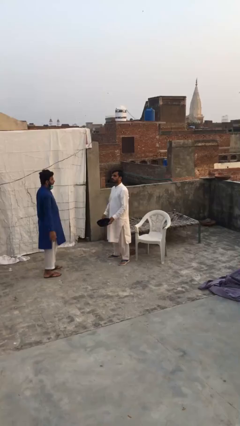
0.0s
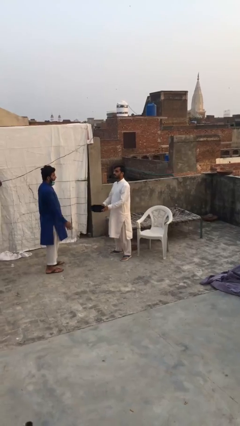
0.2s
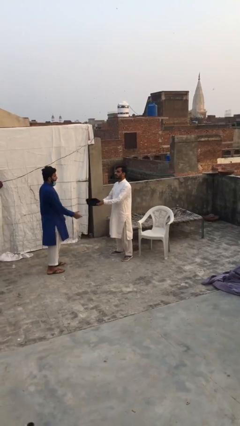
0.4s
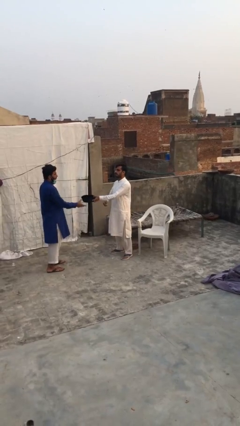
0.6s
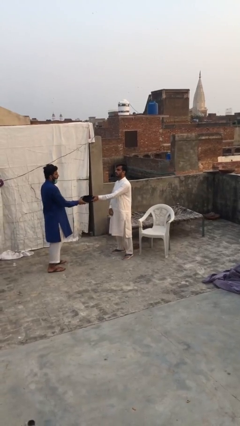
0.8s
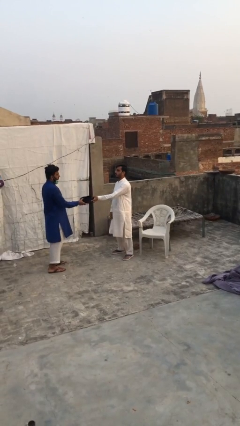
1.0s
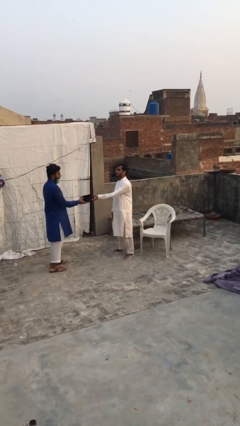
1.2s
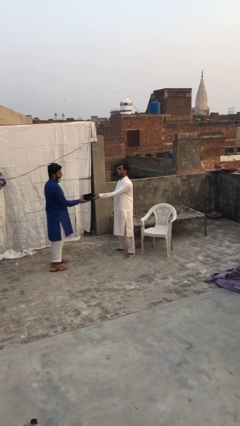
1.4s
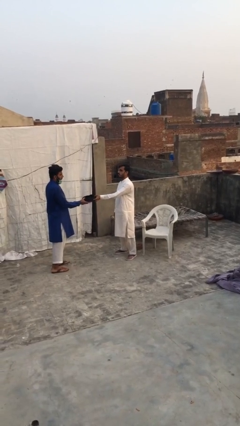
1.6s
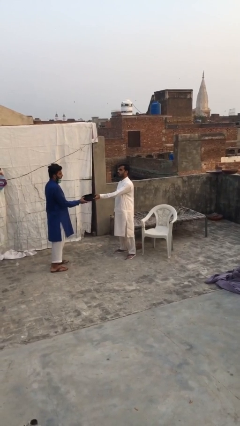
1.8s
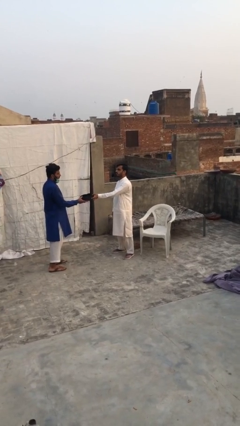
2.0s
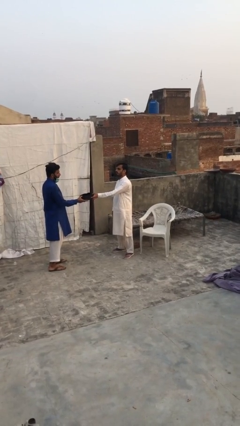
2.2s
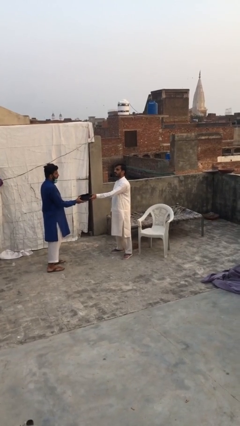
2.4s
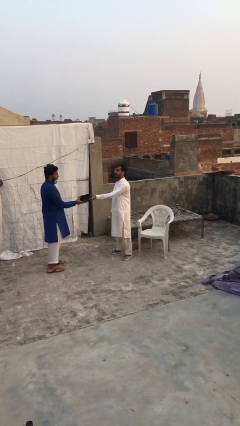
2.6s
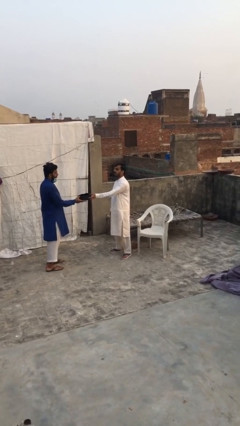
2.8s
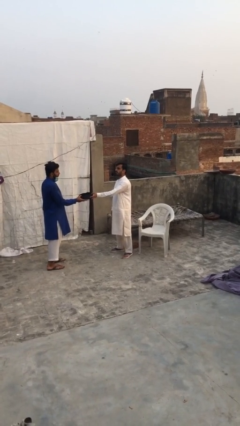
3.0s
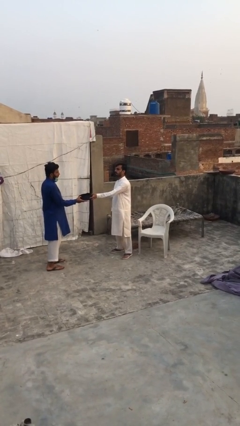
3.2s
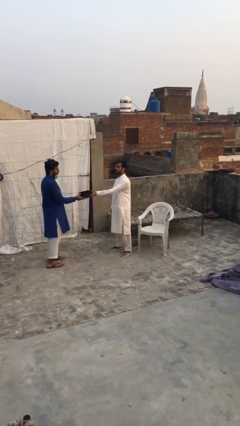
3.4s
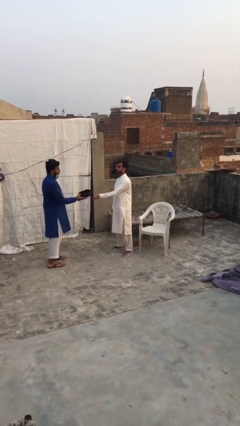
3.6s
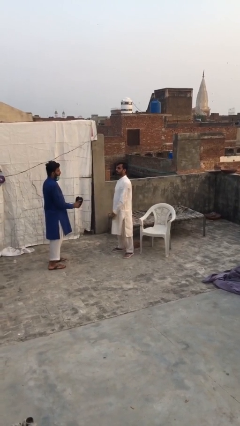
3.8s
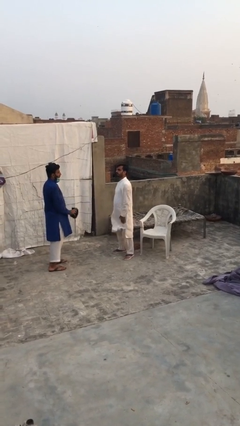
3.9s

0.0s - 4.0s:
person transfers object to person

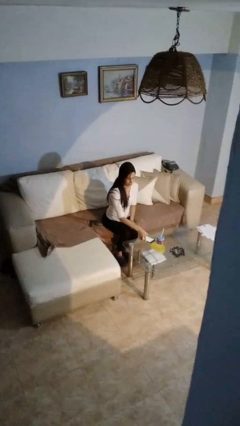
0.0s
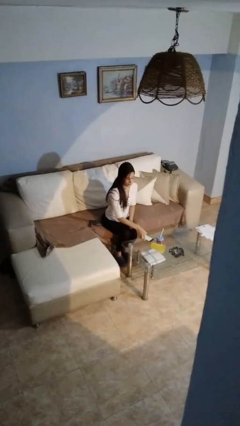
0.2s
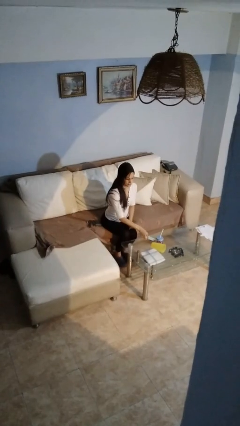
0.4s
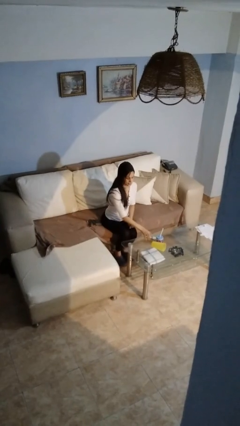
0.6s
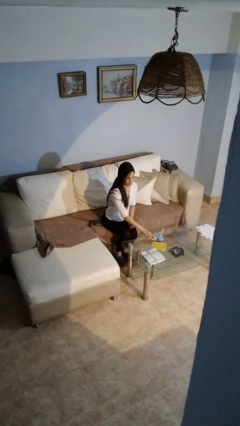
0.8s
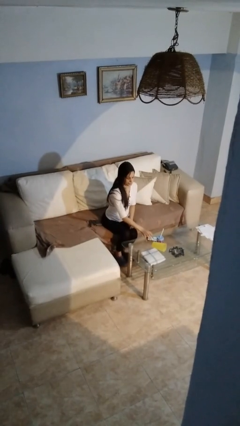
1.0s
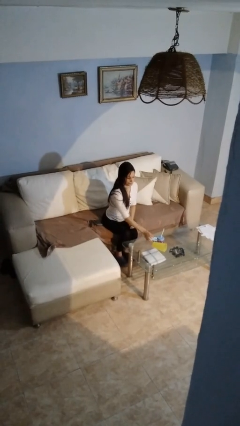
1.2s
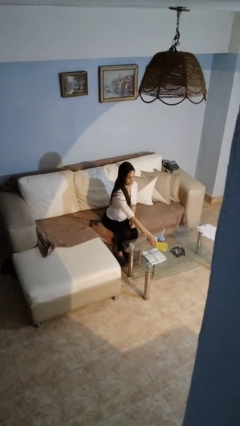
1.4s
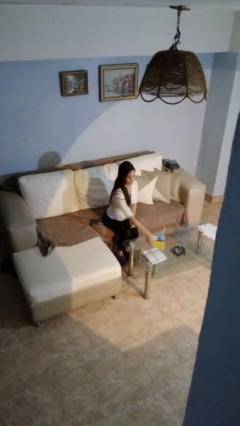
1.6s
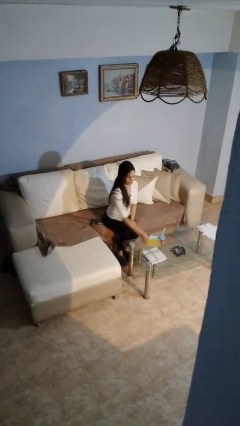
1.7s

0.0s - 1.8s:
person sets upright glass

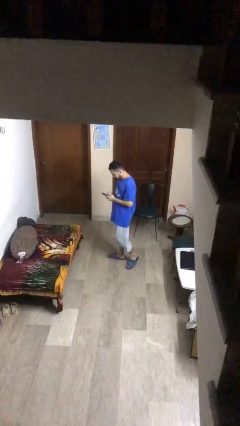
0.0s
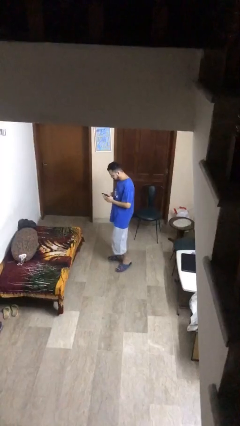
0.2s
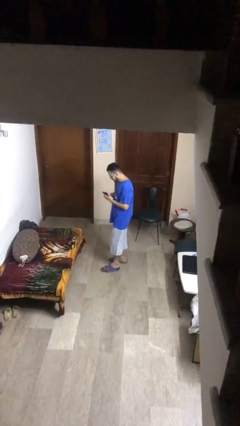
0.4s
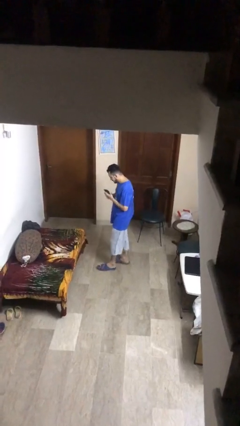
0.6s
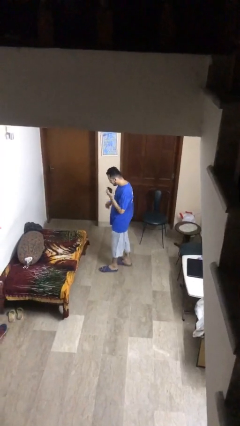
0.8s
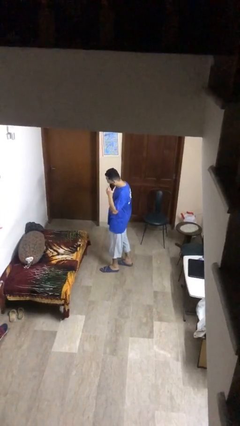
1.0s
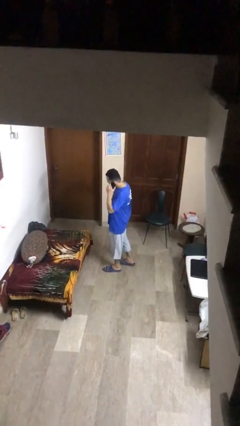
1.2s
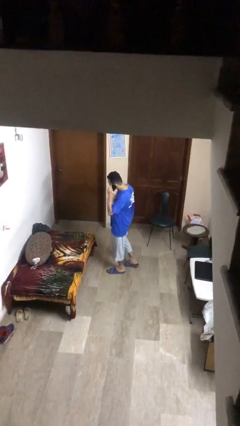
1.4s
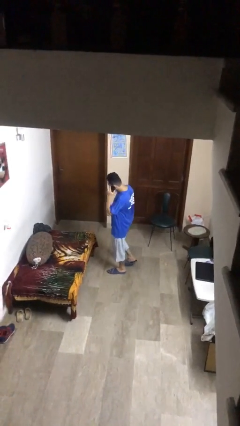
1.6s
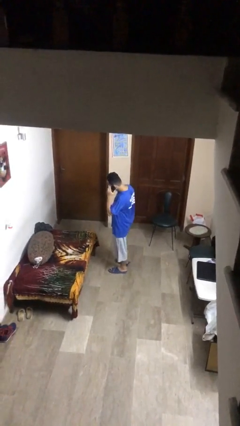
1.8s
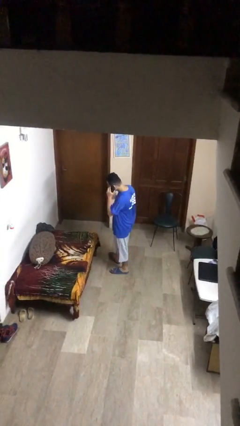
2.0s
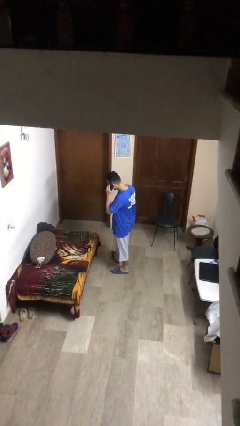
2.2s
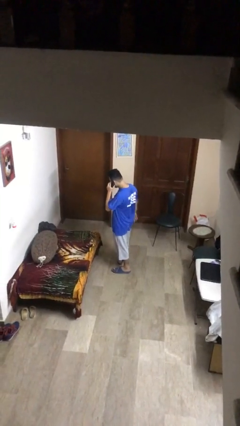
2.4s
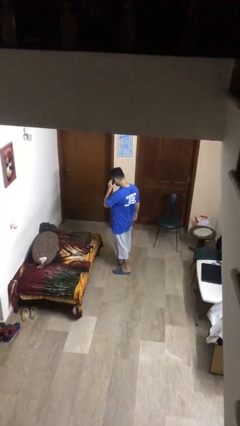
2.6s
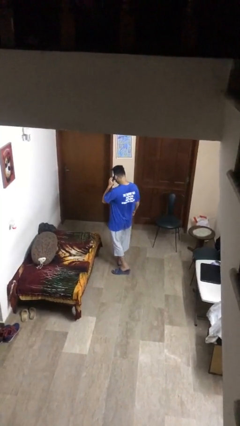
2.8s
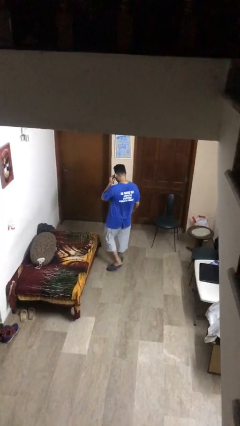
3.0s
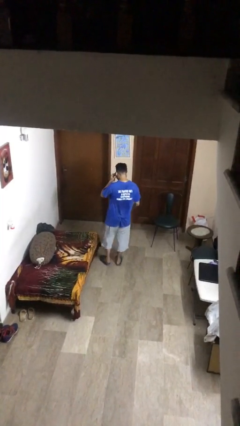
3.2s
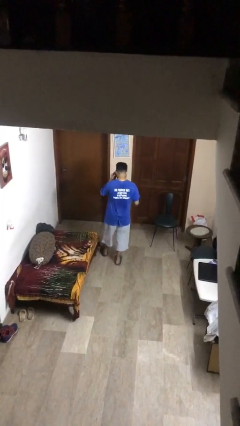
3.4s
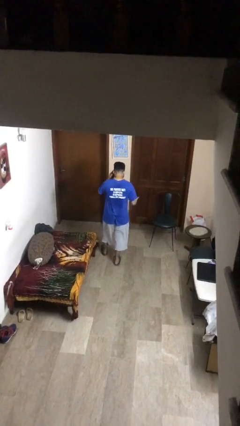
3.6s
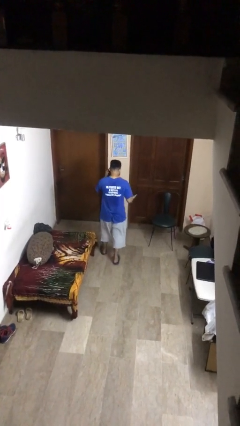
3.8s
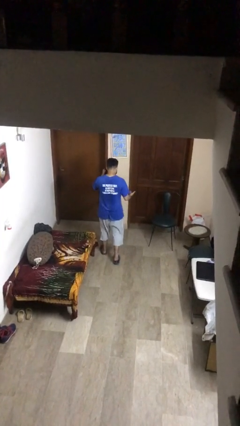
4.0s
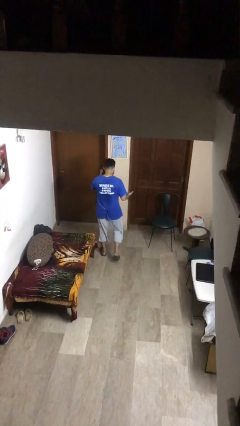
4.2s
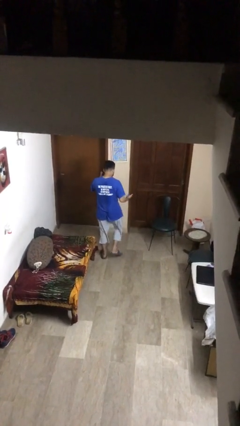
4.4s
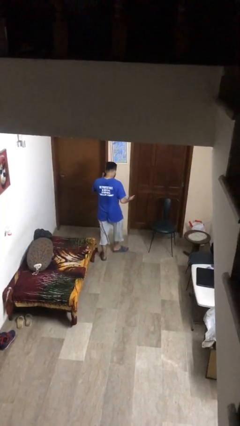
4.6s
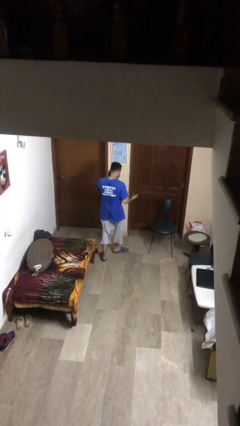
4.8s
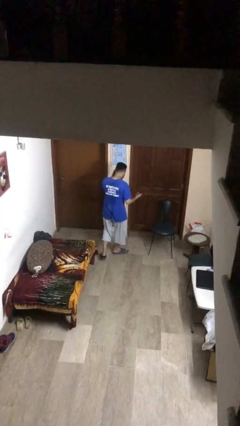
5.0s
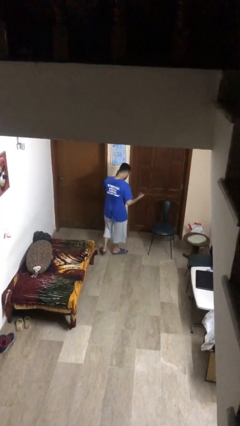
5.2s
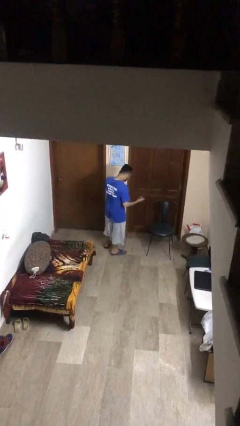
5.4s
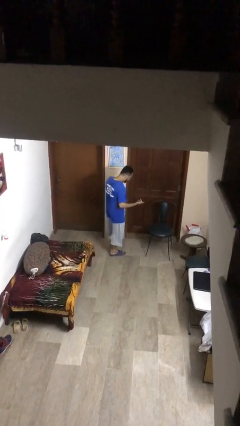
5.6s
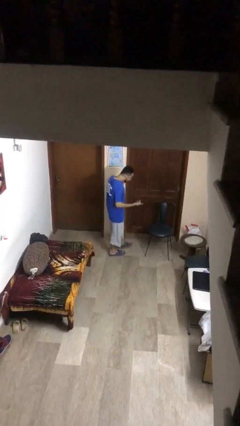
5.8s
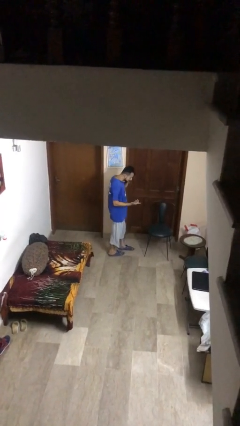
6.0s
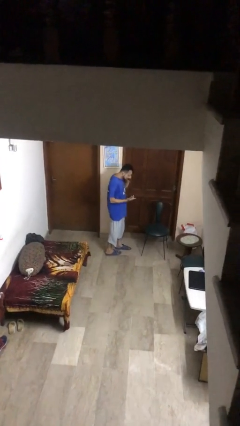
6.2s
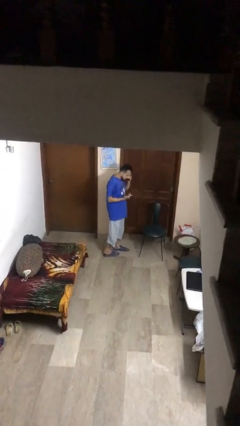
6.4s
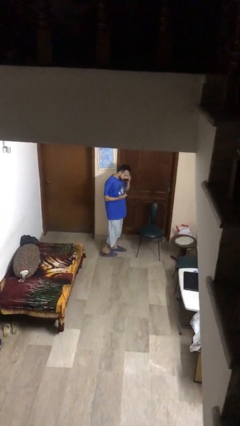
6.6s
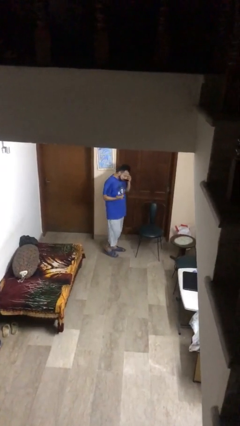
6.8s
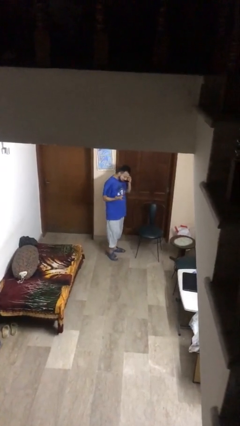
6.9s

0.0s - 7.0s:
person talks on phone

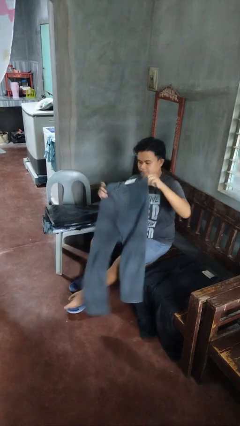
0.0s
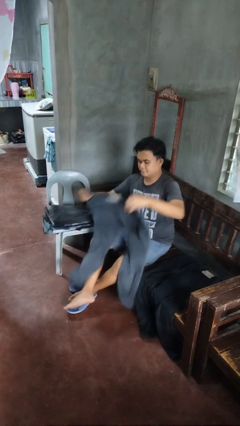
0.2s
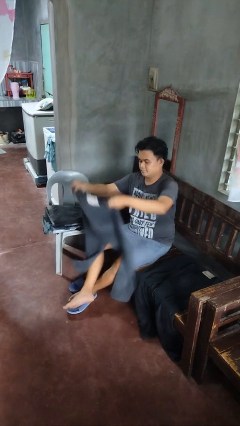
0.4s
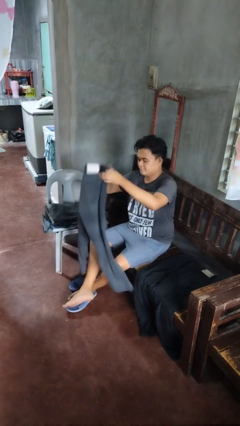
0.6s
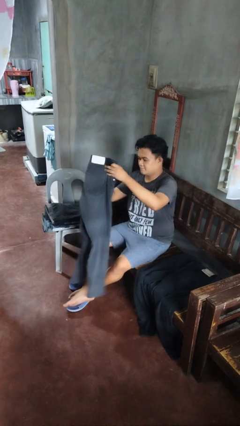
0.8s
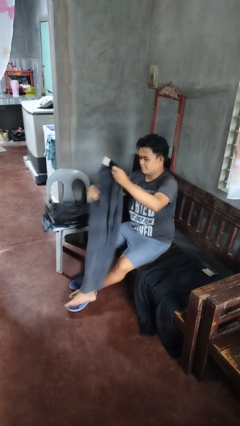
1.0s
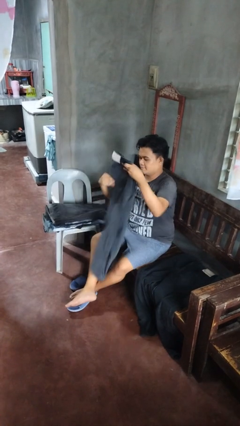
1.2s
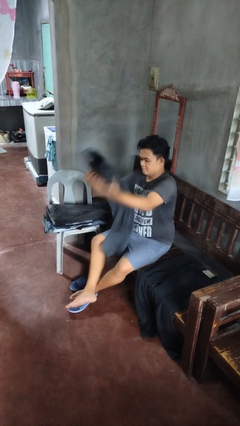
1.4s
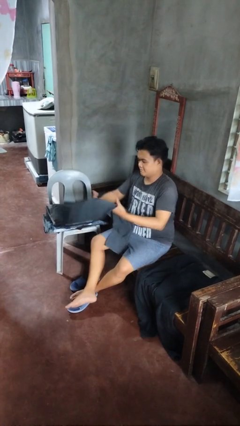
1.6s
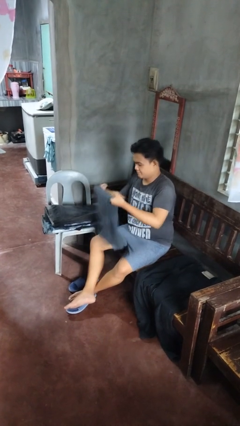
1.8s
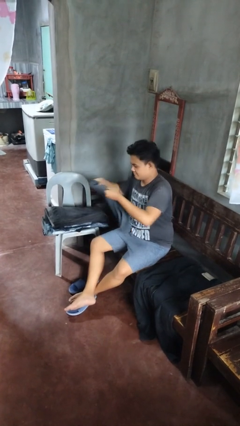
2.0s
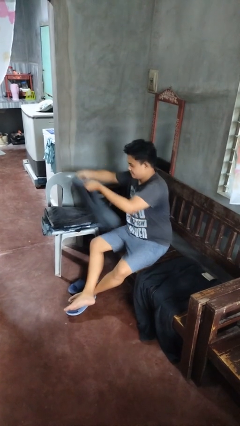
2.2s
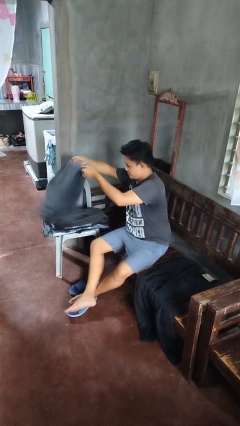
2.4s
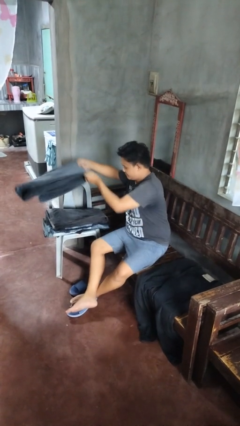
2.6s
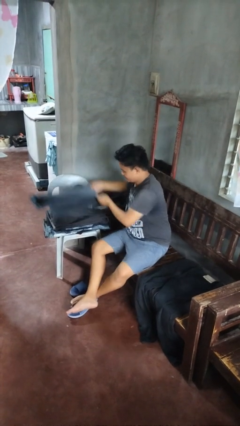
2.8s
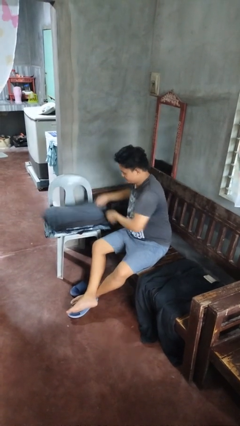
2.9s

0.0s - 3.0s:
person folds pants

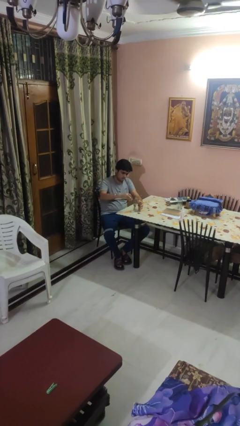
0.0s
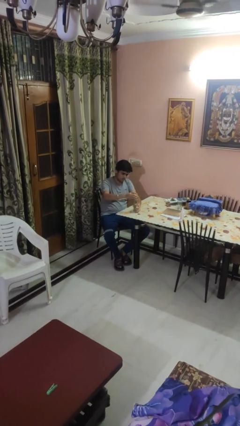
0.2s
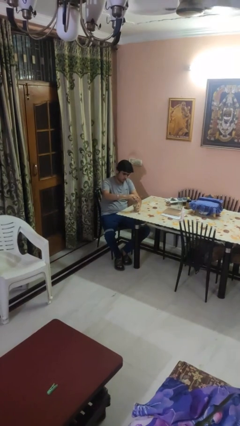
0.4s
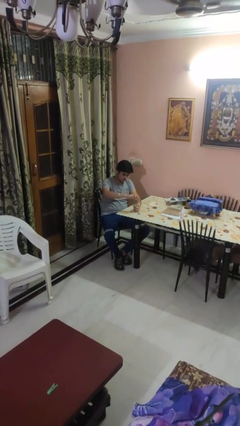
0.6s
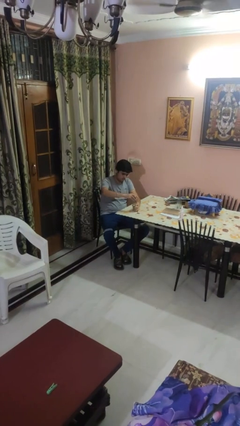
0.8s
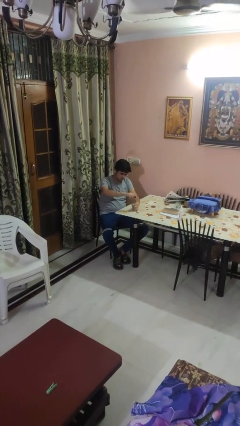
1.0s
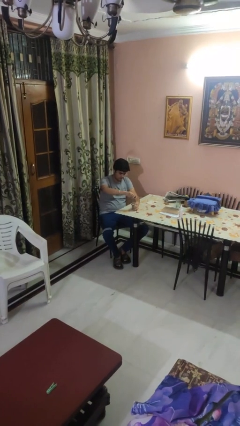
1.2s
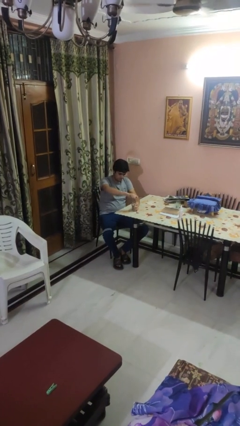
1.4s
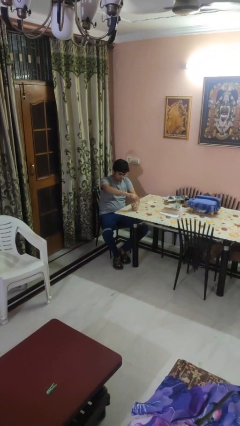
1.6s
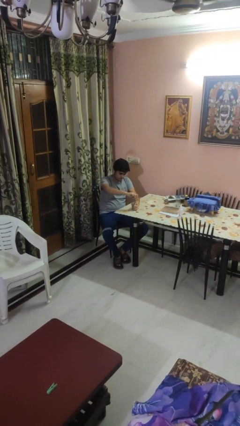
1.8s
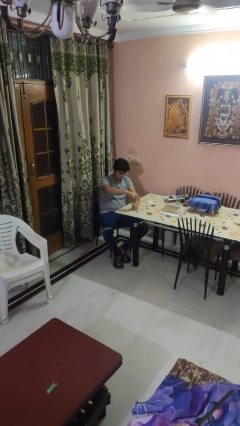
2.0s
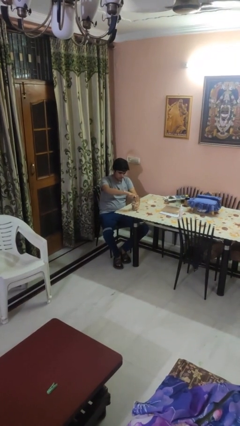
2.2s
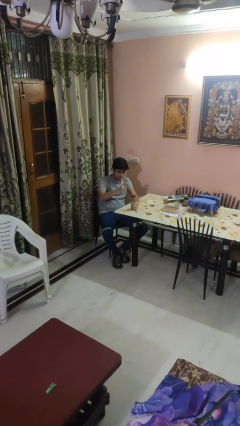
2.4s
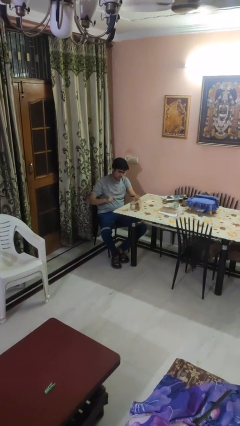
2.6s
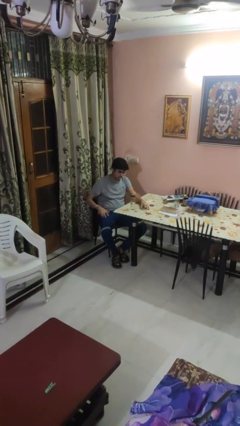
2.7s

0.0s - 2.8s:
person screws lid to bottle
